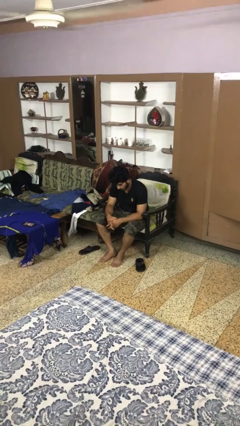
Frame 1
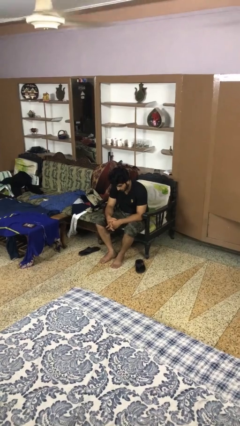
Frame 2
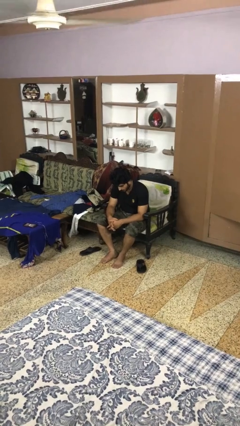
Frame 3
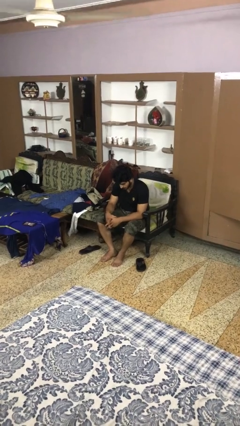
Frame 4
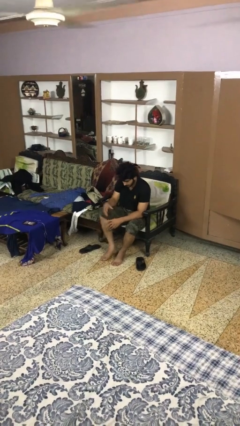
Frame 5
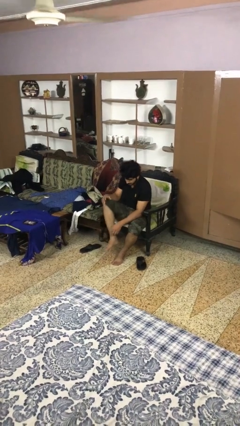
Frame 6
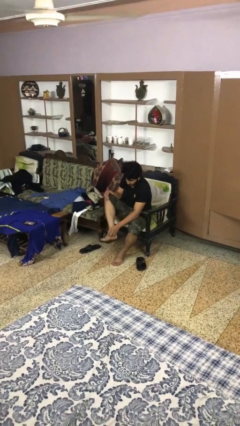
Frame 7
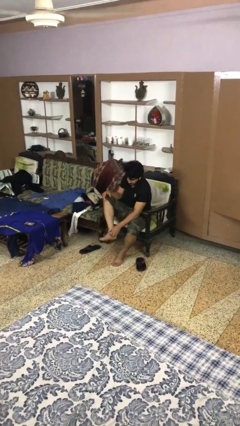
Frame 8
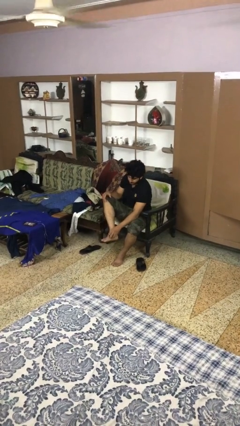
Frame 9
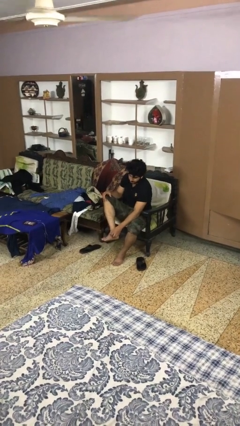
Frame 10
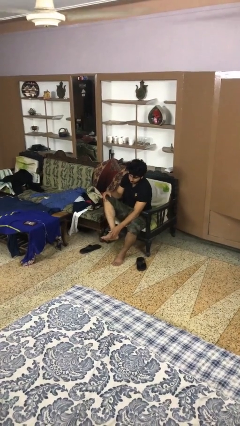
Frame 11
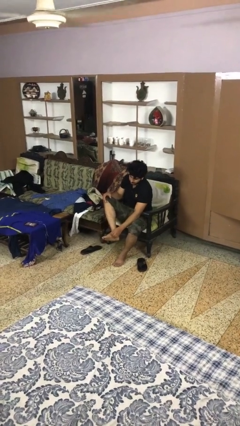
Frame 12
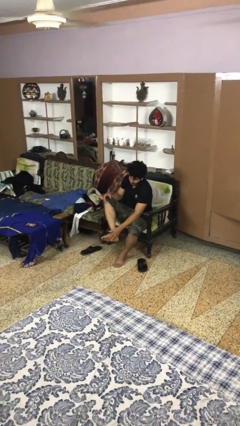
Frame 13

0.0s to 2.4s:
person rubs foot

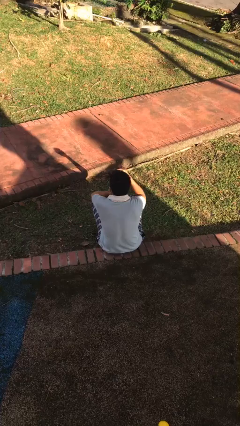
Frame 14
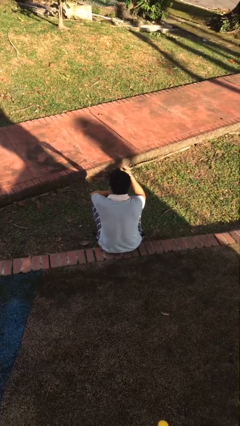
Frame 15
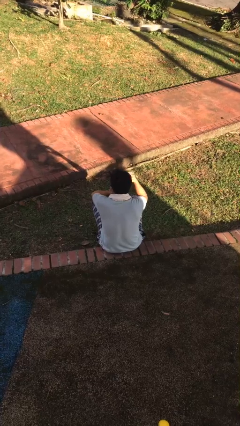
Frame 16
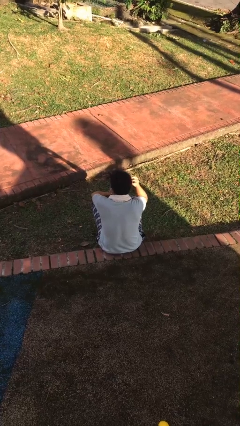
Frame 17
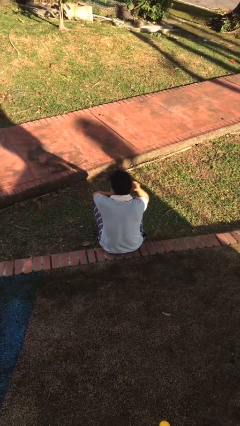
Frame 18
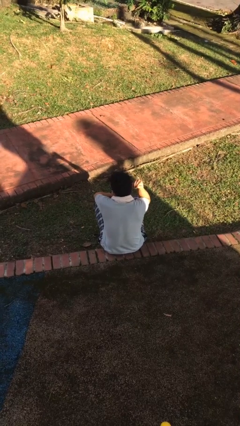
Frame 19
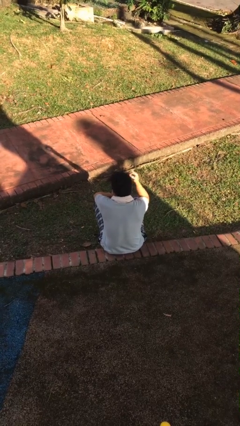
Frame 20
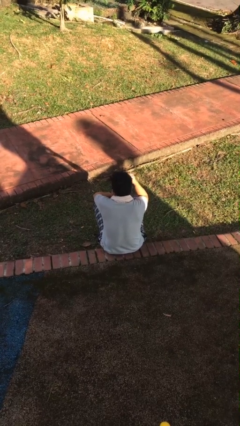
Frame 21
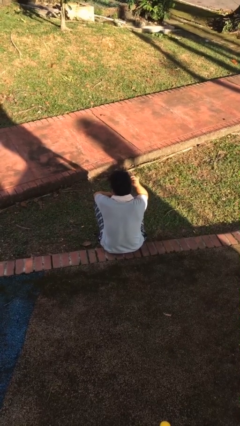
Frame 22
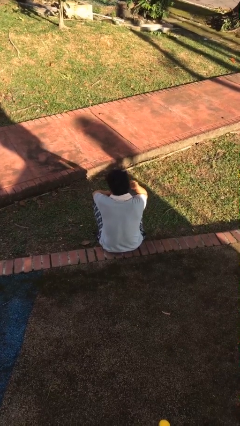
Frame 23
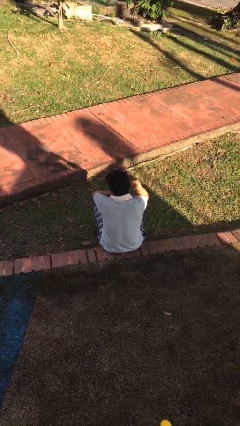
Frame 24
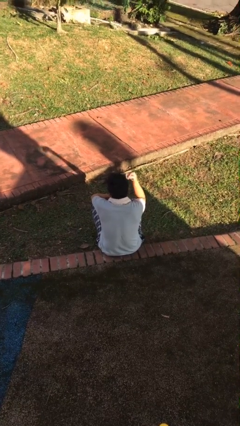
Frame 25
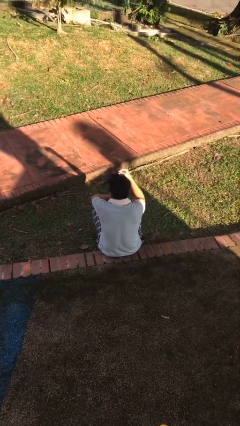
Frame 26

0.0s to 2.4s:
person strokes hair

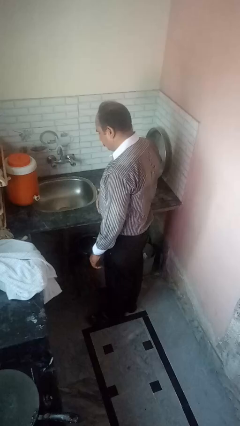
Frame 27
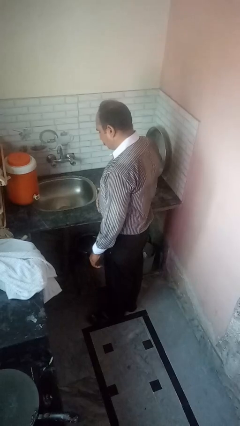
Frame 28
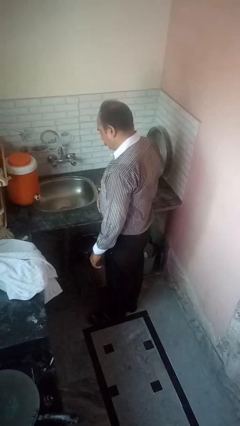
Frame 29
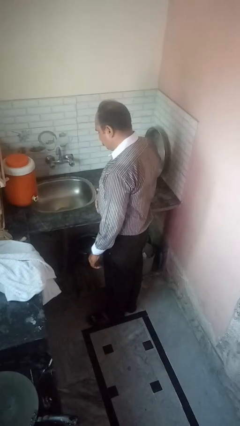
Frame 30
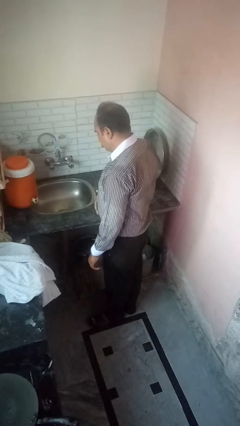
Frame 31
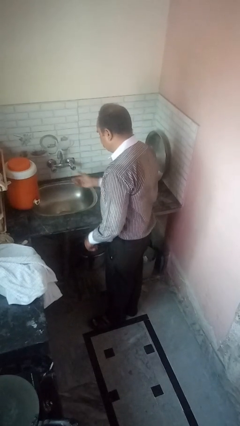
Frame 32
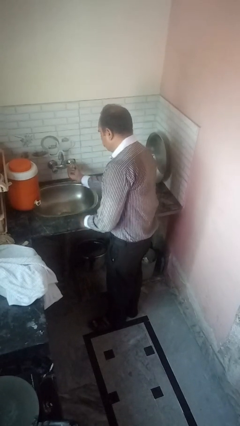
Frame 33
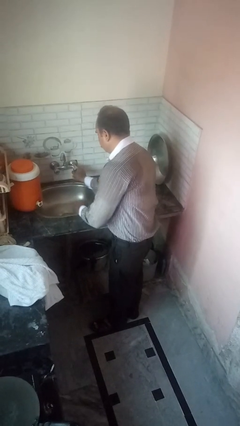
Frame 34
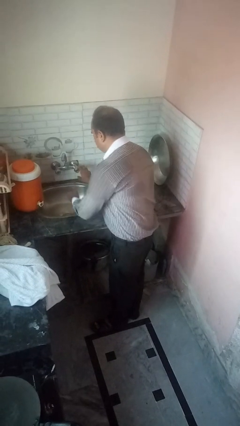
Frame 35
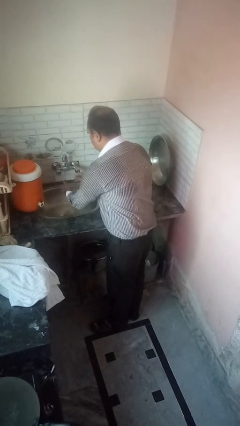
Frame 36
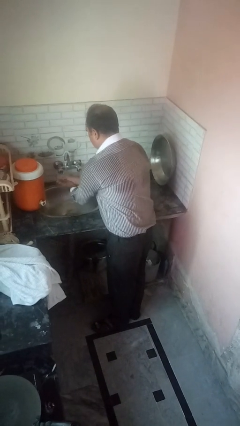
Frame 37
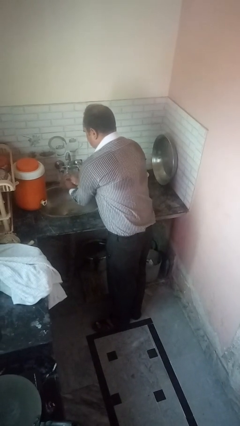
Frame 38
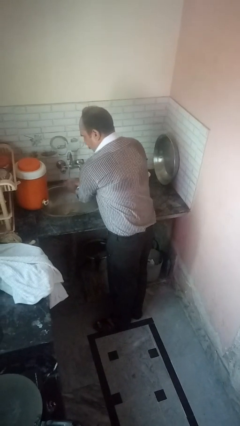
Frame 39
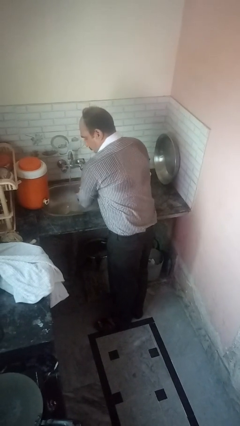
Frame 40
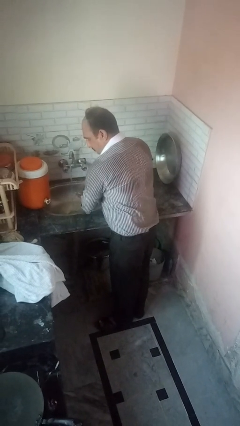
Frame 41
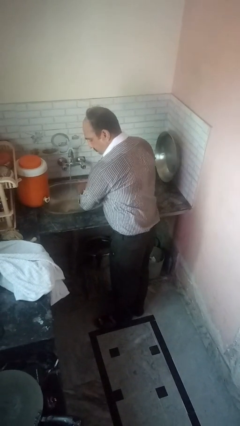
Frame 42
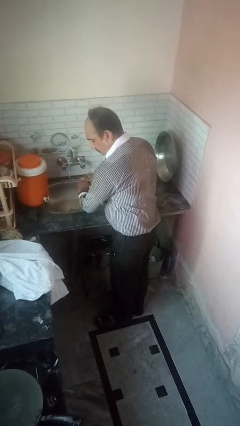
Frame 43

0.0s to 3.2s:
person washes hands

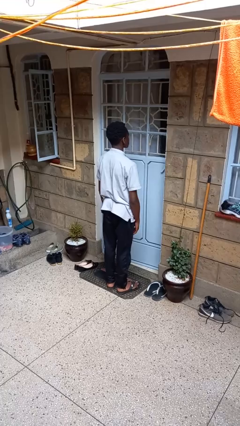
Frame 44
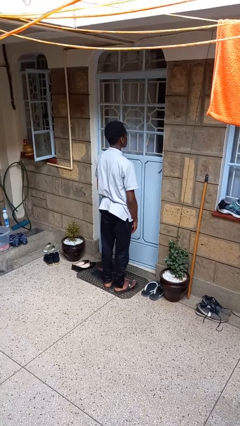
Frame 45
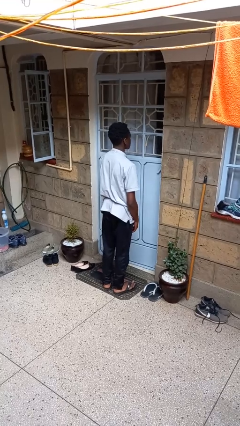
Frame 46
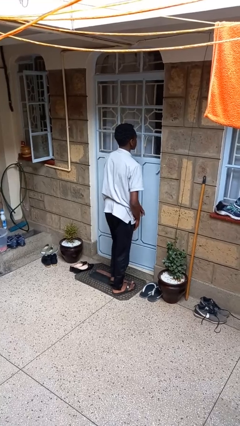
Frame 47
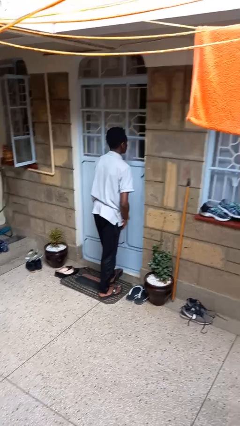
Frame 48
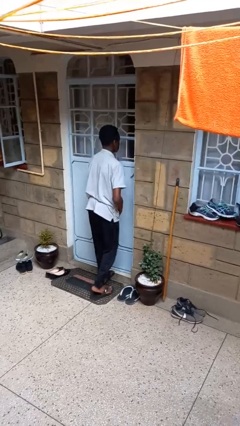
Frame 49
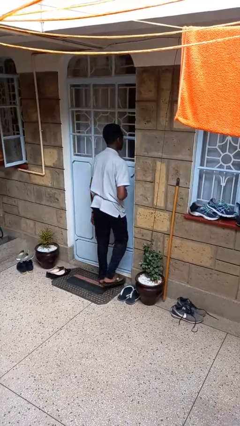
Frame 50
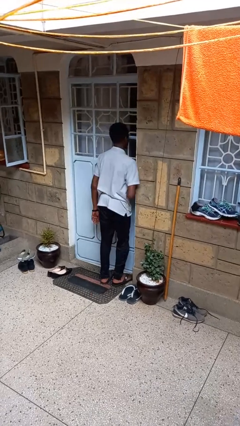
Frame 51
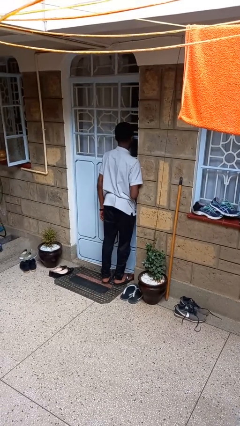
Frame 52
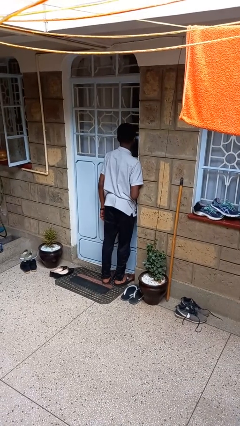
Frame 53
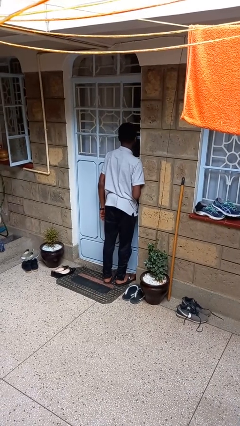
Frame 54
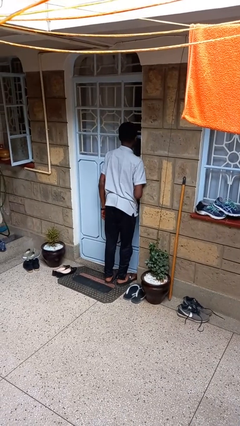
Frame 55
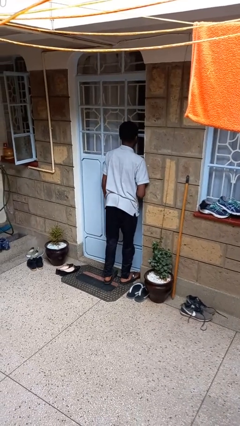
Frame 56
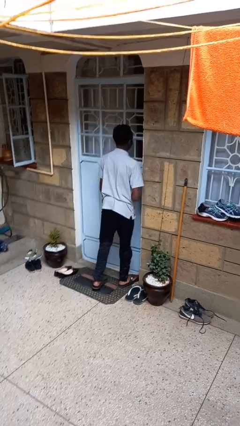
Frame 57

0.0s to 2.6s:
person bumps into wall

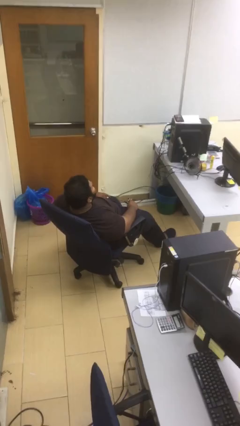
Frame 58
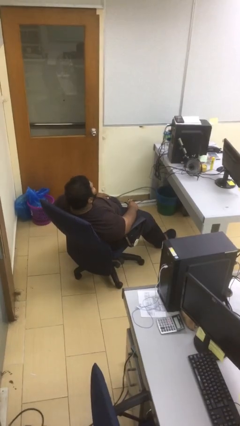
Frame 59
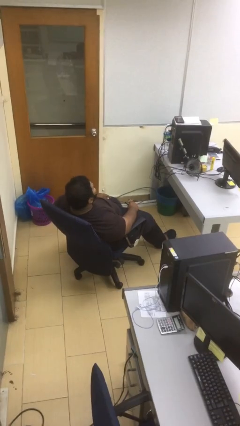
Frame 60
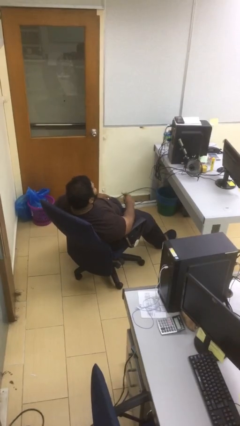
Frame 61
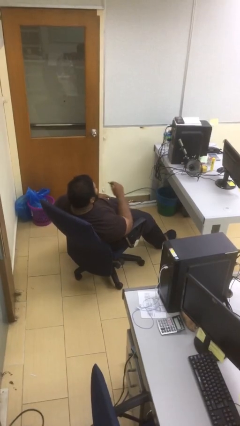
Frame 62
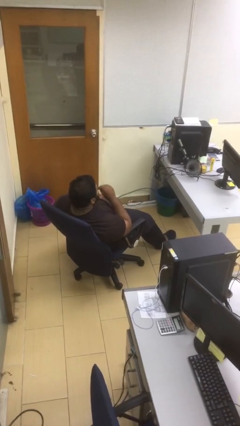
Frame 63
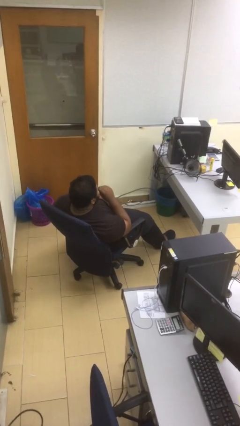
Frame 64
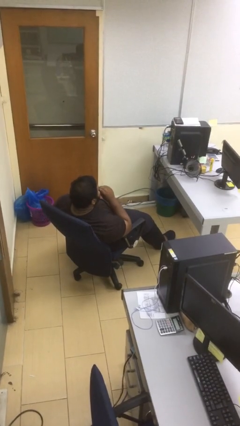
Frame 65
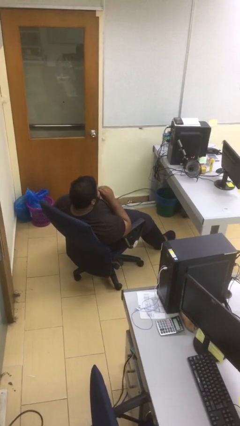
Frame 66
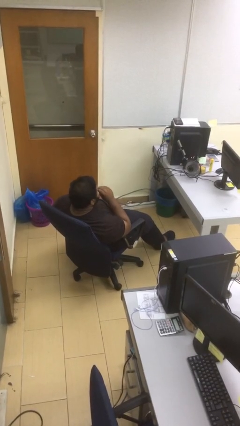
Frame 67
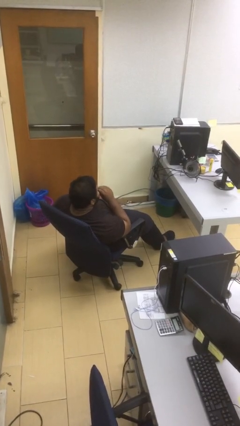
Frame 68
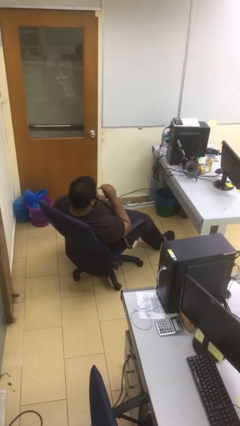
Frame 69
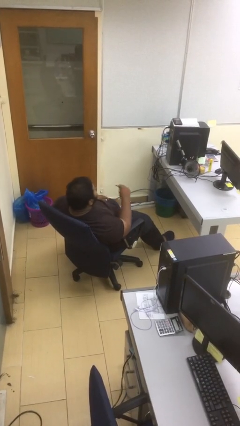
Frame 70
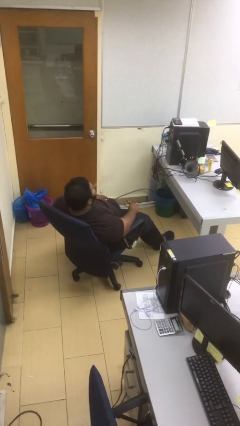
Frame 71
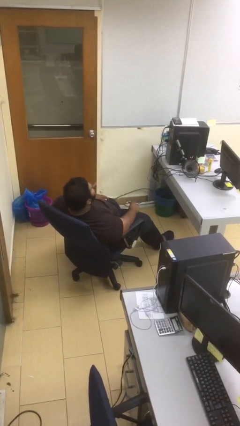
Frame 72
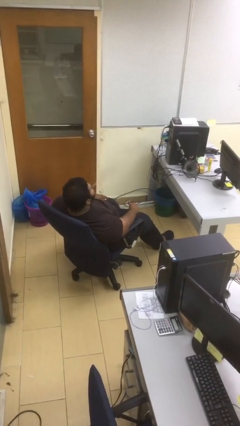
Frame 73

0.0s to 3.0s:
person vapes

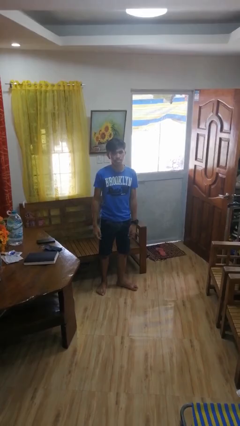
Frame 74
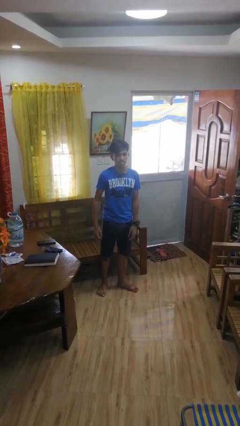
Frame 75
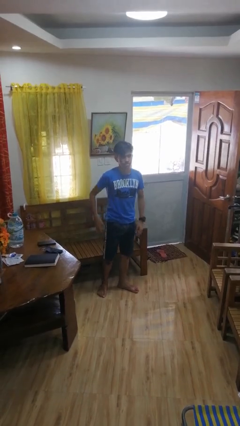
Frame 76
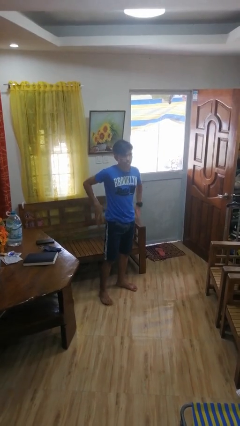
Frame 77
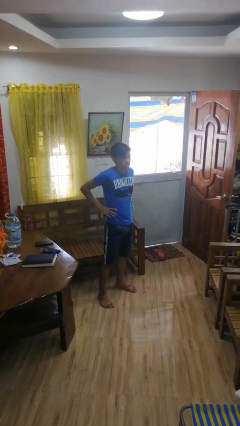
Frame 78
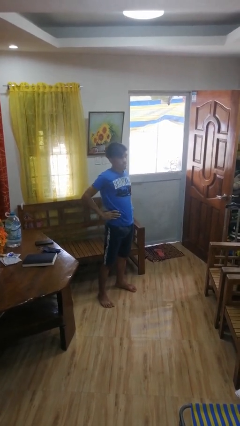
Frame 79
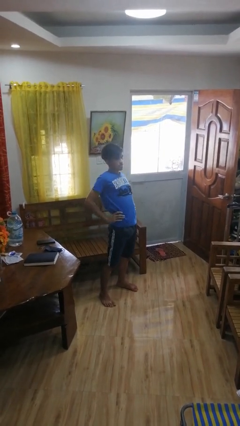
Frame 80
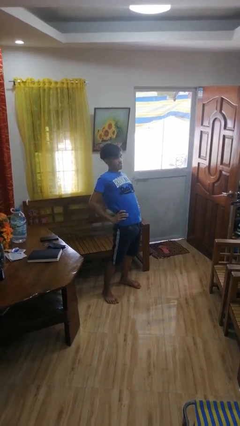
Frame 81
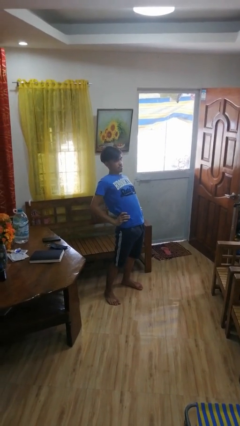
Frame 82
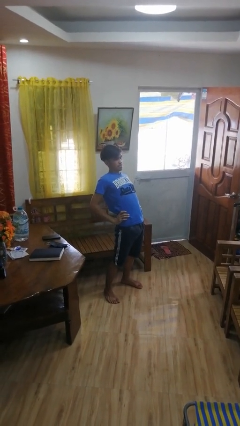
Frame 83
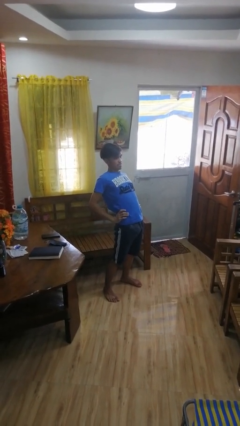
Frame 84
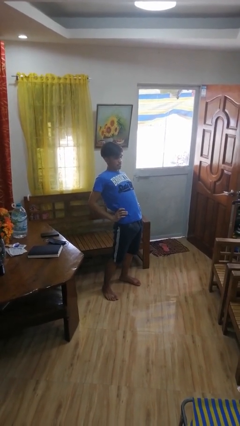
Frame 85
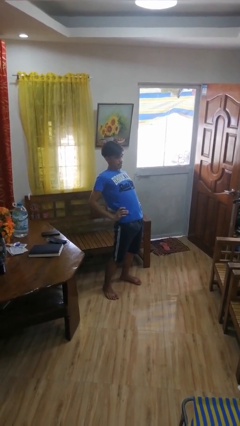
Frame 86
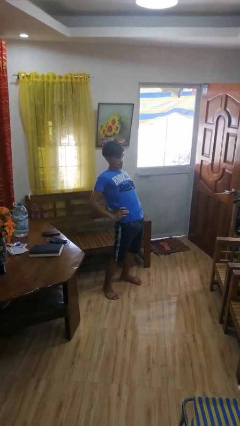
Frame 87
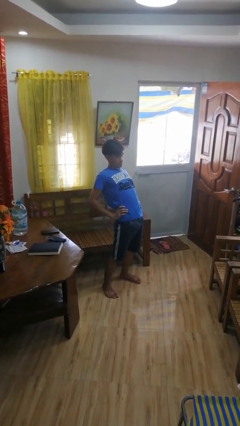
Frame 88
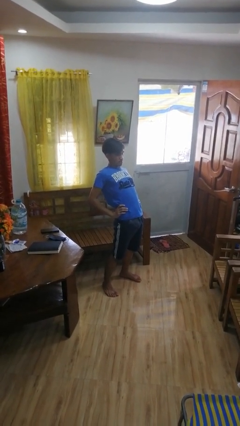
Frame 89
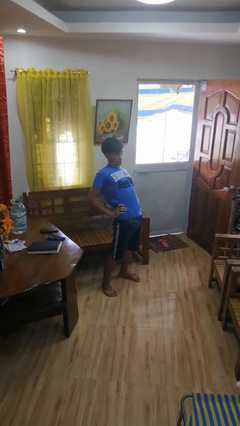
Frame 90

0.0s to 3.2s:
person stretches back

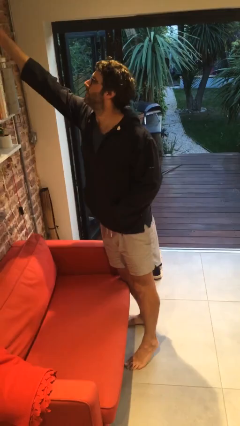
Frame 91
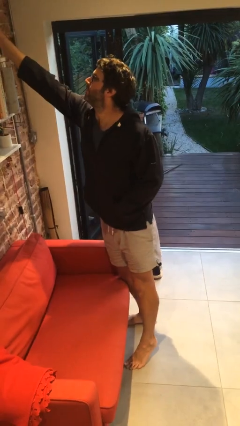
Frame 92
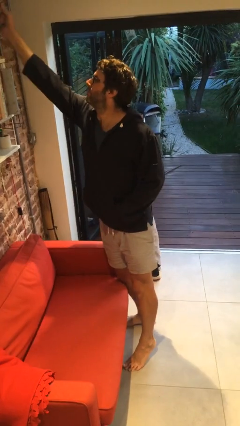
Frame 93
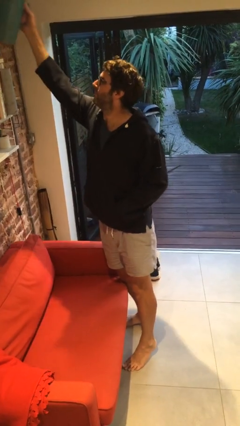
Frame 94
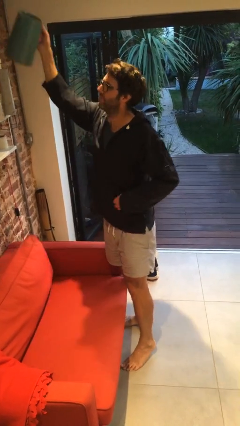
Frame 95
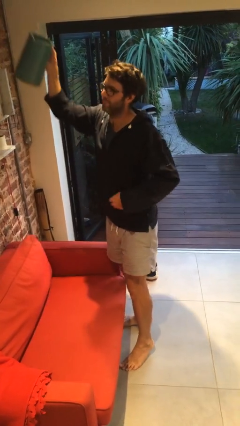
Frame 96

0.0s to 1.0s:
person picks up object from shelf
